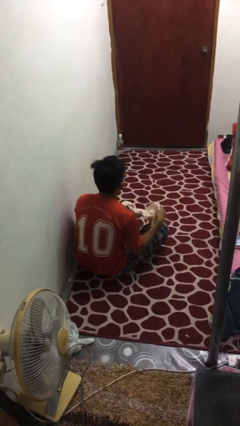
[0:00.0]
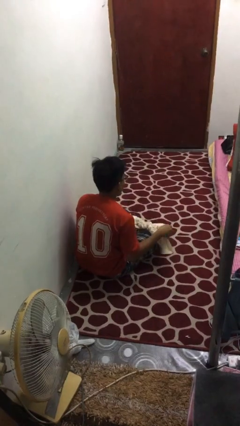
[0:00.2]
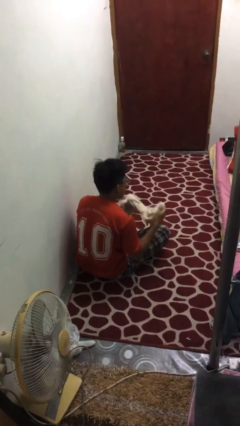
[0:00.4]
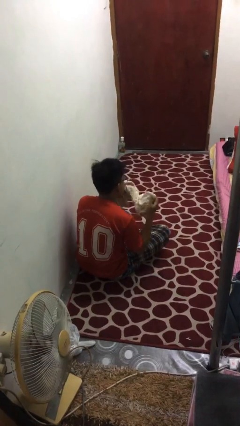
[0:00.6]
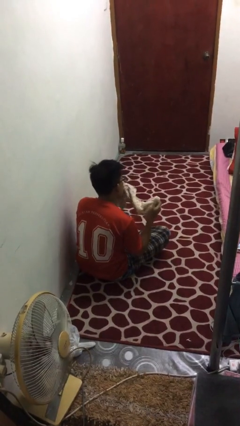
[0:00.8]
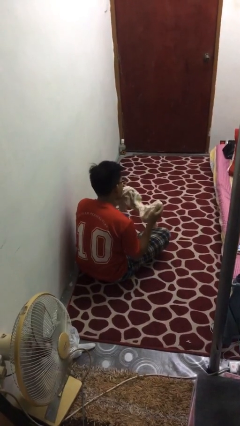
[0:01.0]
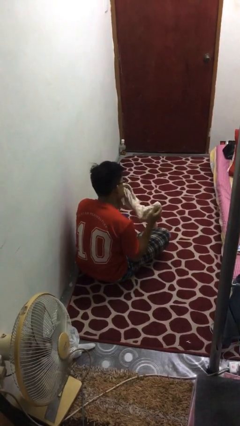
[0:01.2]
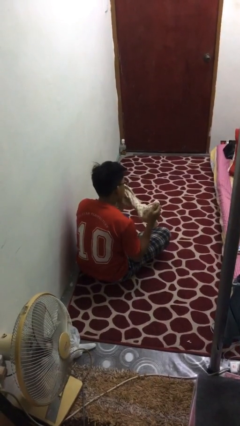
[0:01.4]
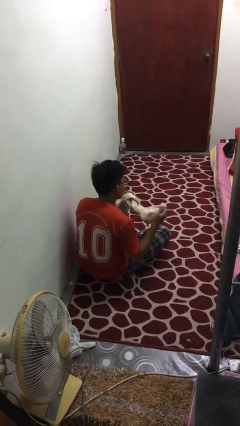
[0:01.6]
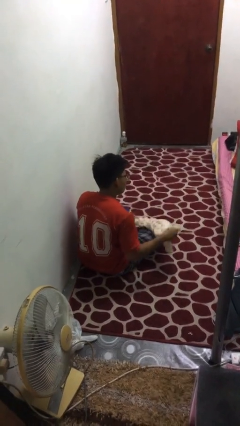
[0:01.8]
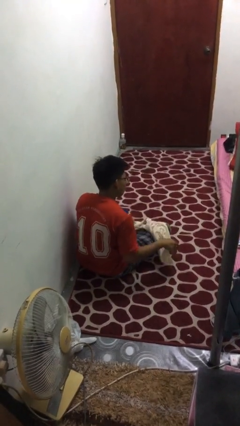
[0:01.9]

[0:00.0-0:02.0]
person wipes mouth with napkin

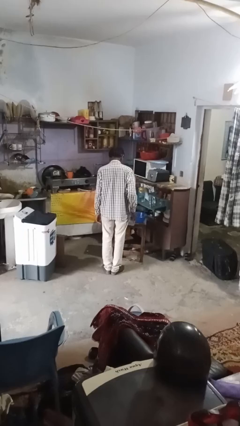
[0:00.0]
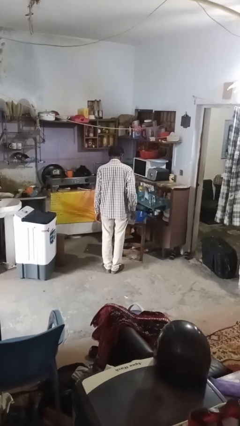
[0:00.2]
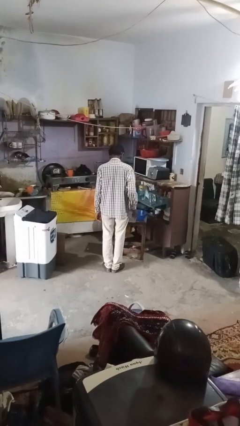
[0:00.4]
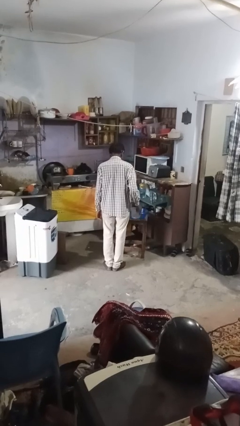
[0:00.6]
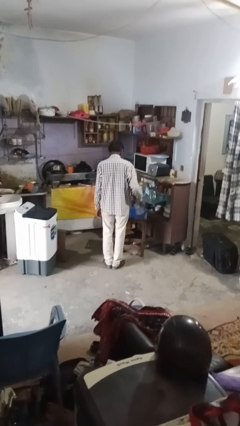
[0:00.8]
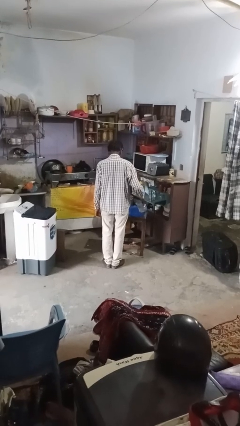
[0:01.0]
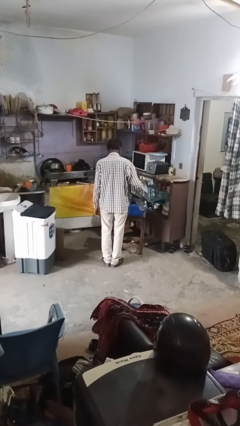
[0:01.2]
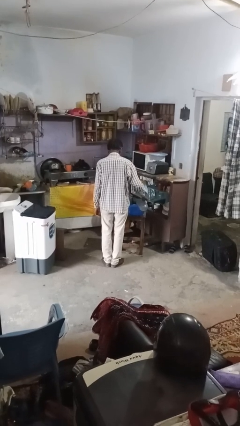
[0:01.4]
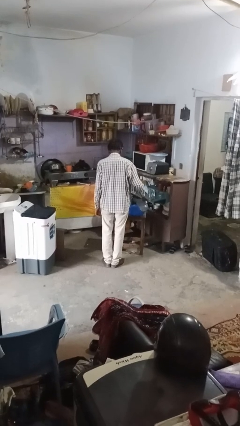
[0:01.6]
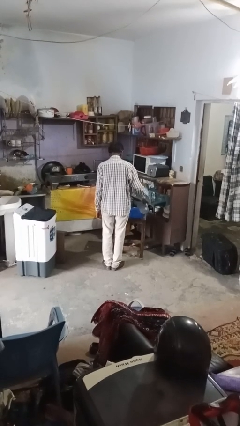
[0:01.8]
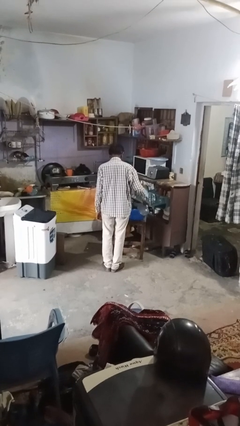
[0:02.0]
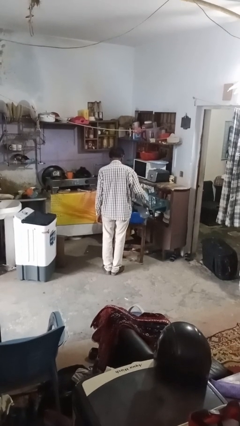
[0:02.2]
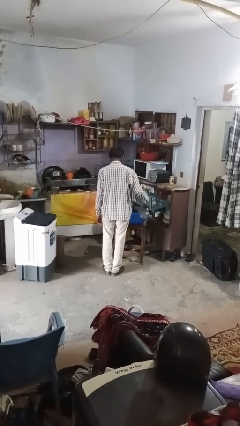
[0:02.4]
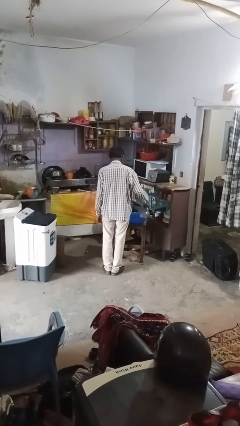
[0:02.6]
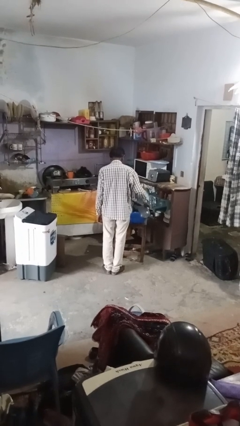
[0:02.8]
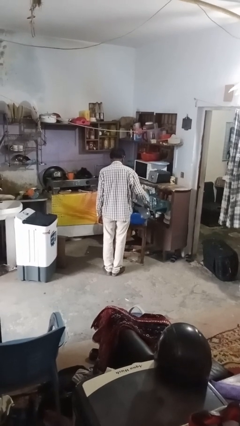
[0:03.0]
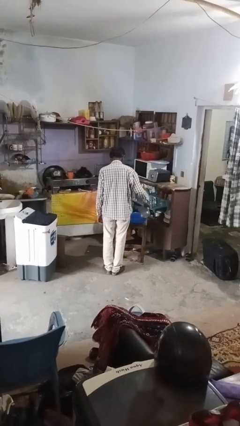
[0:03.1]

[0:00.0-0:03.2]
person pours into bowl

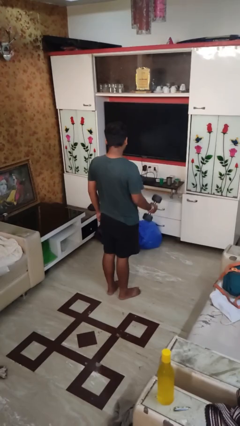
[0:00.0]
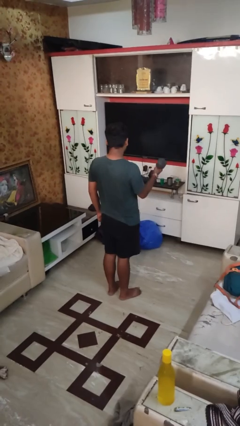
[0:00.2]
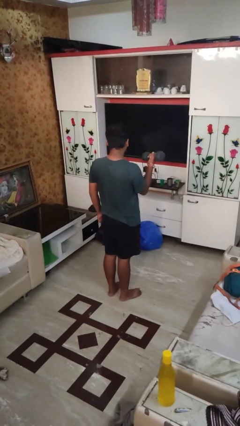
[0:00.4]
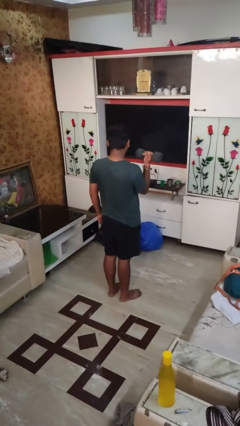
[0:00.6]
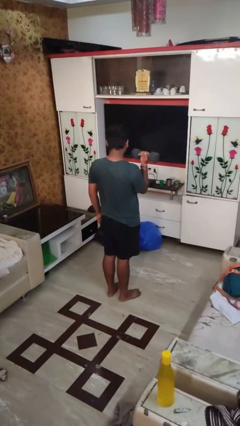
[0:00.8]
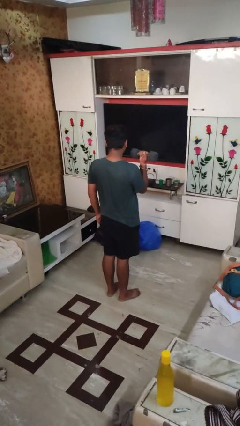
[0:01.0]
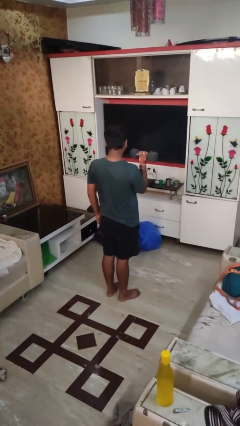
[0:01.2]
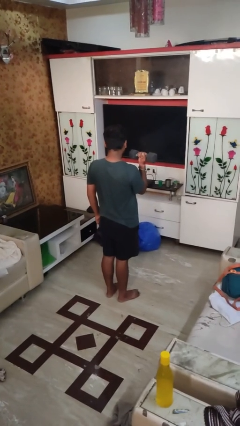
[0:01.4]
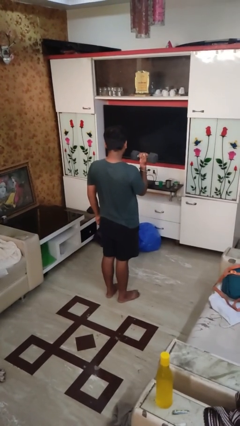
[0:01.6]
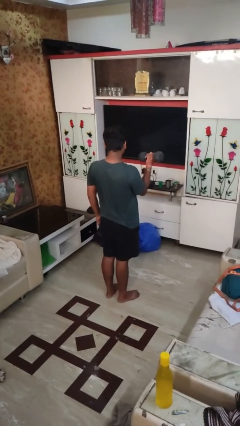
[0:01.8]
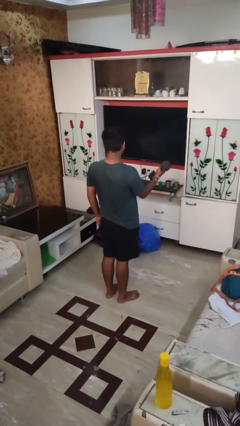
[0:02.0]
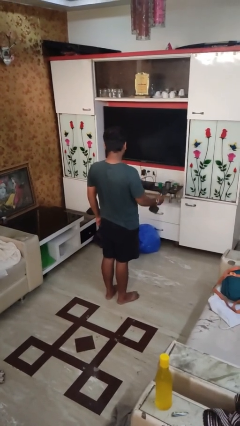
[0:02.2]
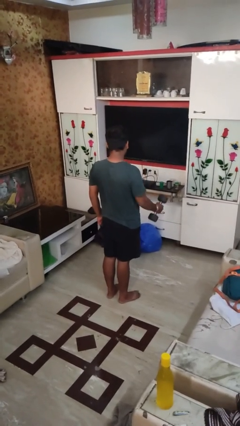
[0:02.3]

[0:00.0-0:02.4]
person lifts dumbbells

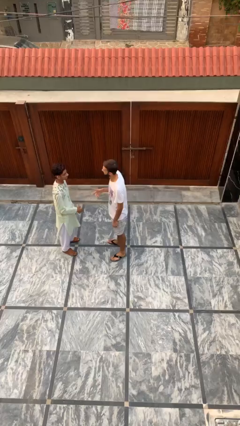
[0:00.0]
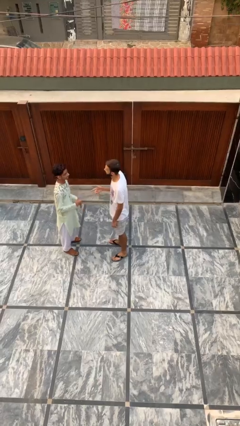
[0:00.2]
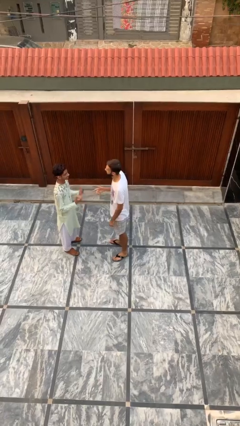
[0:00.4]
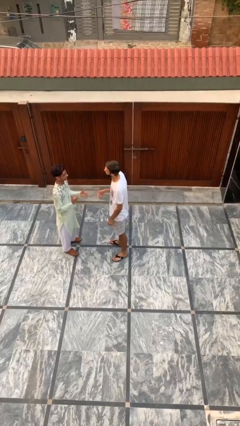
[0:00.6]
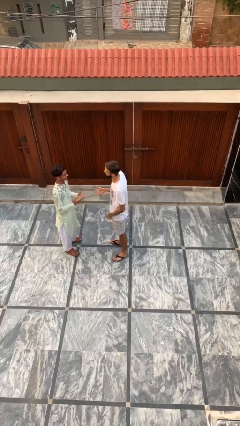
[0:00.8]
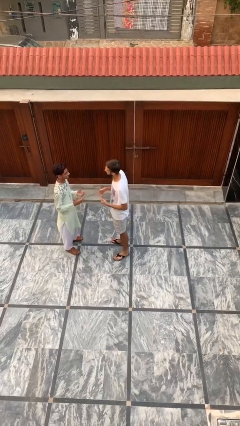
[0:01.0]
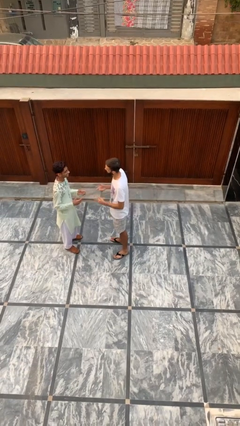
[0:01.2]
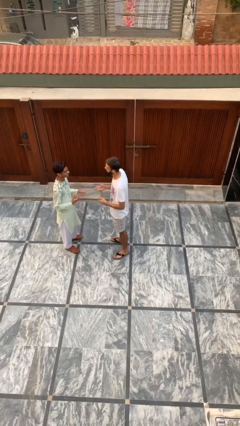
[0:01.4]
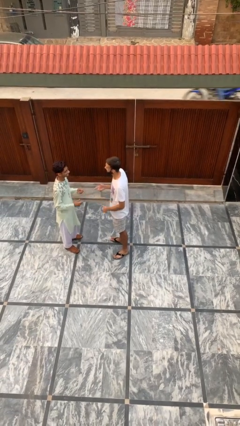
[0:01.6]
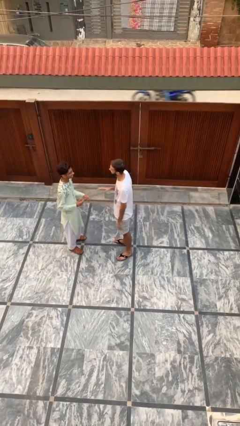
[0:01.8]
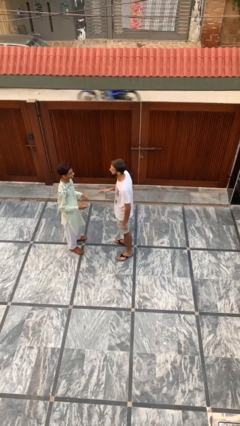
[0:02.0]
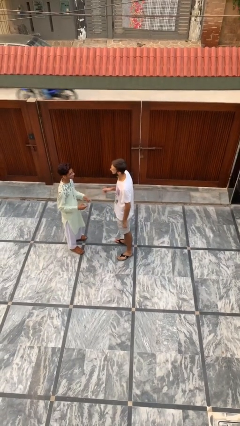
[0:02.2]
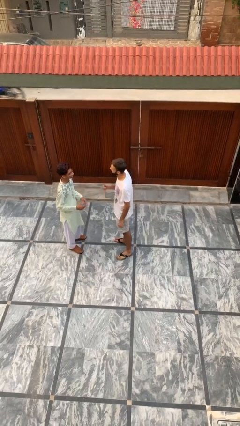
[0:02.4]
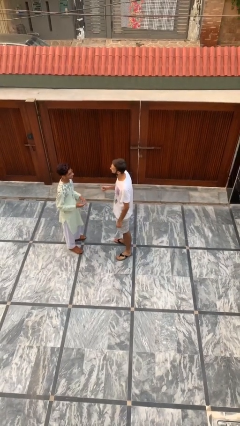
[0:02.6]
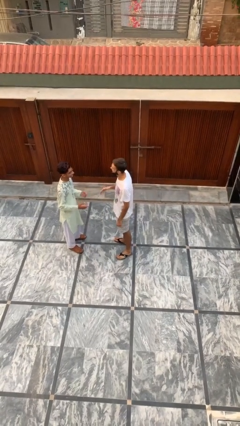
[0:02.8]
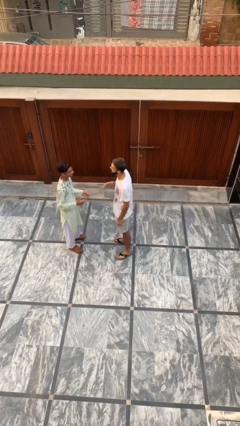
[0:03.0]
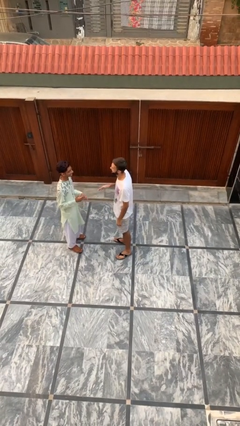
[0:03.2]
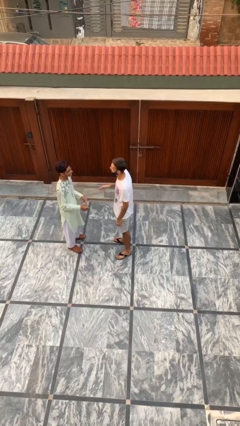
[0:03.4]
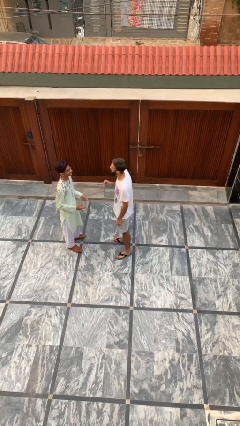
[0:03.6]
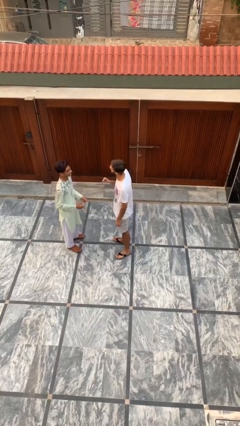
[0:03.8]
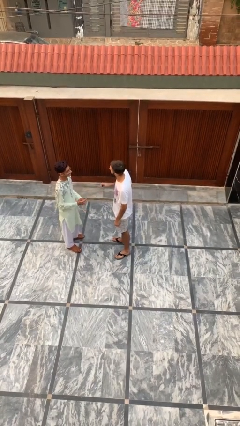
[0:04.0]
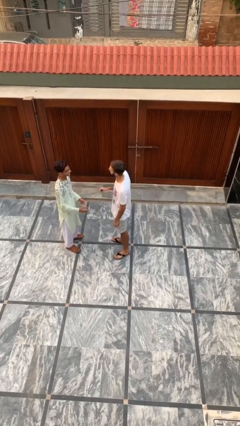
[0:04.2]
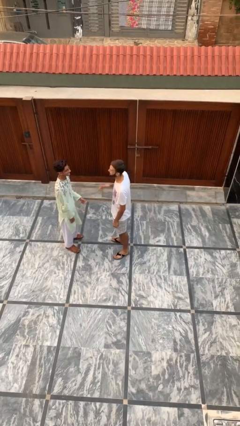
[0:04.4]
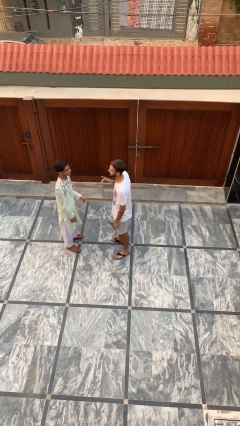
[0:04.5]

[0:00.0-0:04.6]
person talks to person

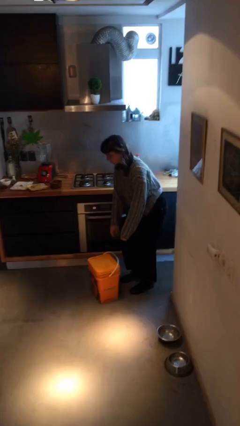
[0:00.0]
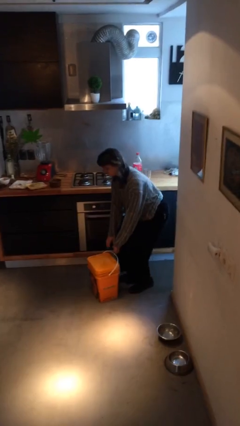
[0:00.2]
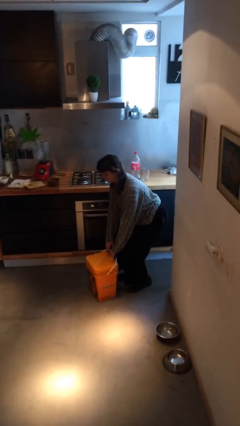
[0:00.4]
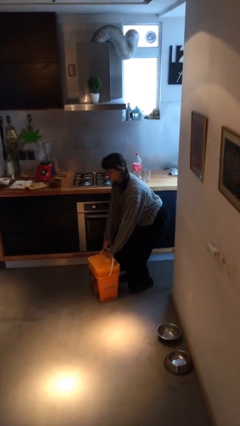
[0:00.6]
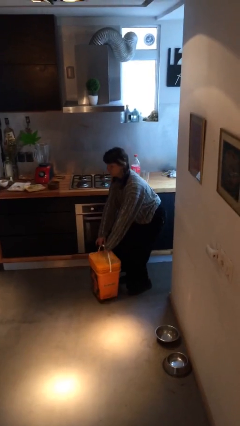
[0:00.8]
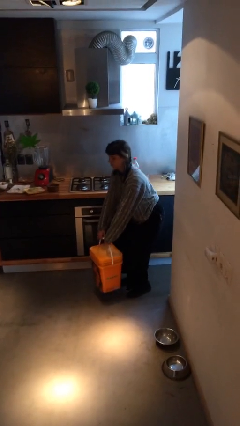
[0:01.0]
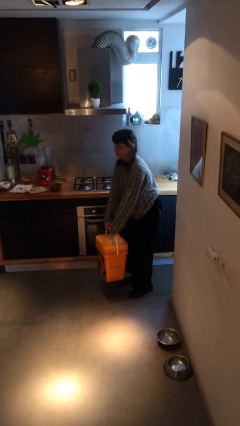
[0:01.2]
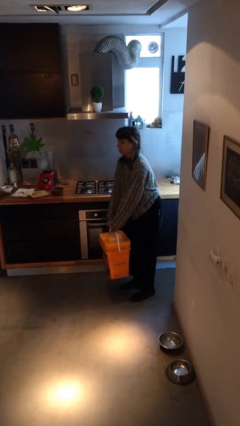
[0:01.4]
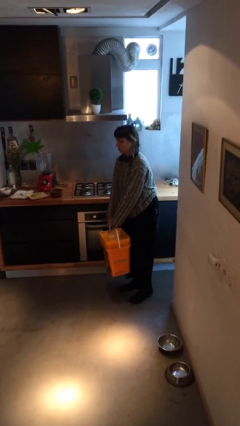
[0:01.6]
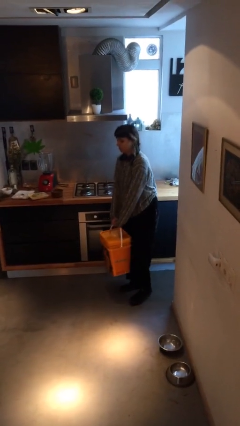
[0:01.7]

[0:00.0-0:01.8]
person picks up object from floor

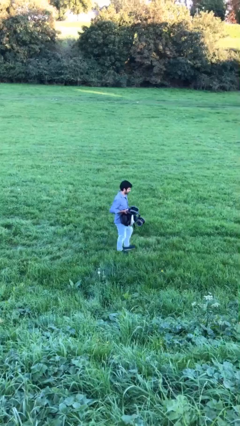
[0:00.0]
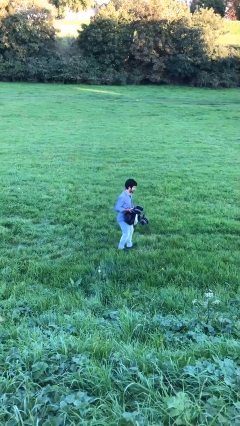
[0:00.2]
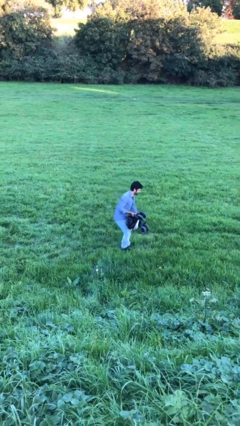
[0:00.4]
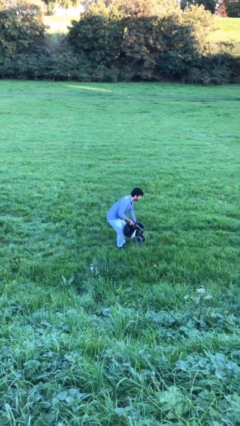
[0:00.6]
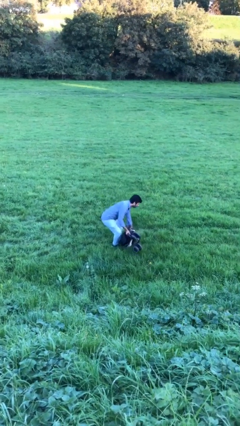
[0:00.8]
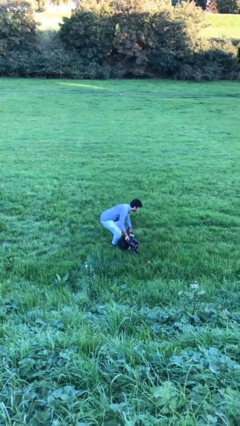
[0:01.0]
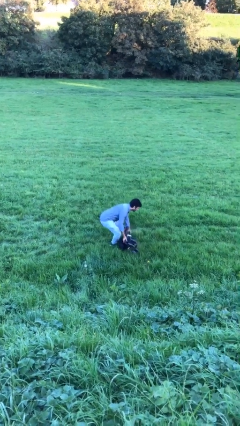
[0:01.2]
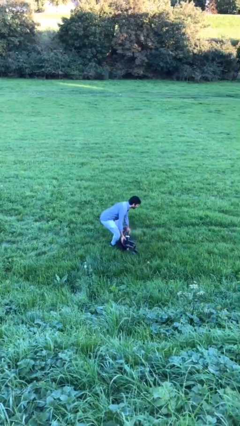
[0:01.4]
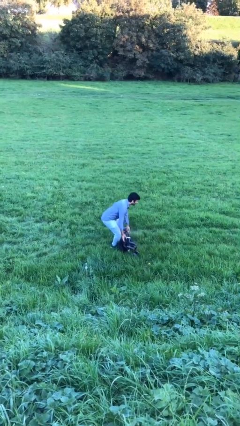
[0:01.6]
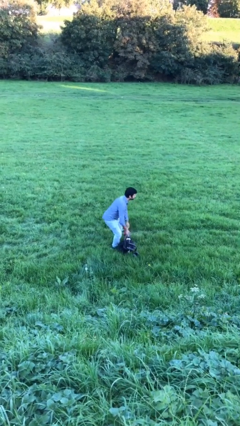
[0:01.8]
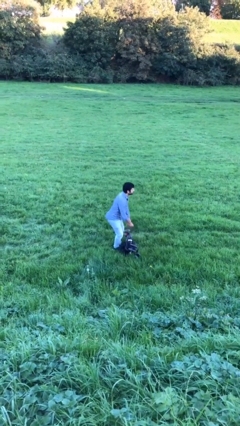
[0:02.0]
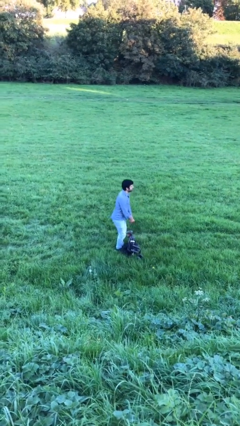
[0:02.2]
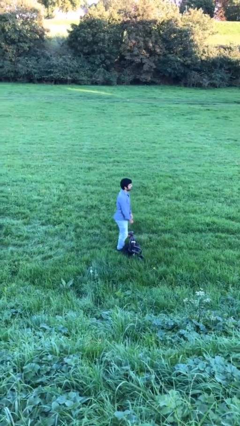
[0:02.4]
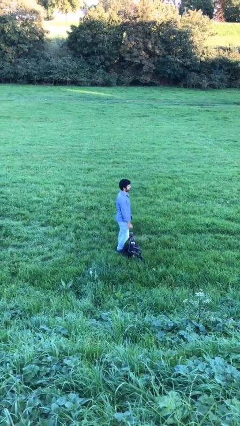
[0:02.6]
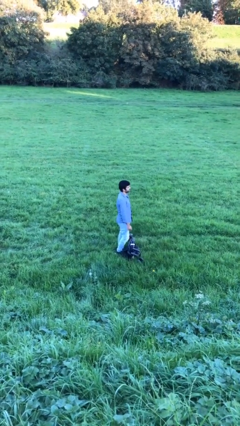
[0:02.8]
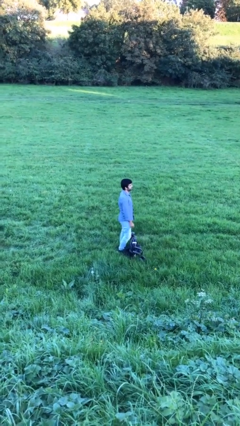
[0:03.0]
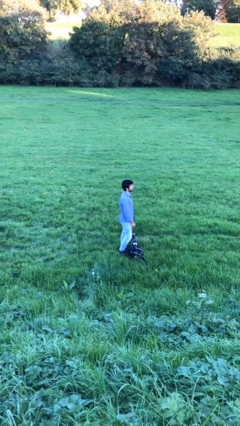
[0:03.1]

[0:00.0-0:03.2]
person puts down object on floor

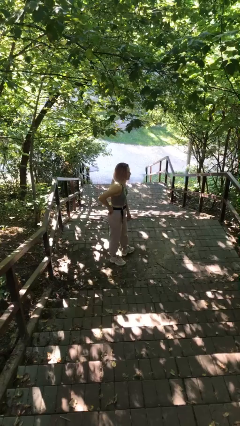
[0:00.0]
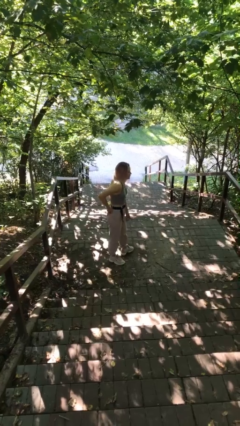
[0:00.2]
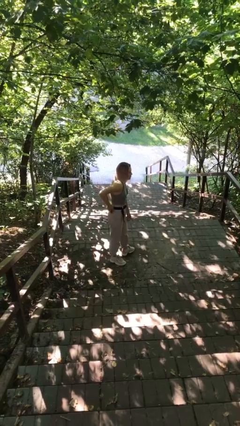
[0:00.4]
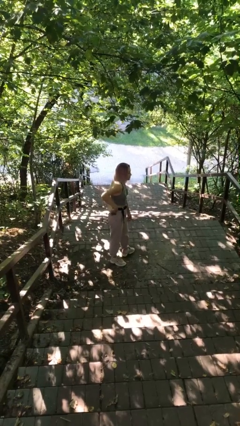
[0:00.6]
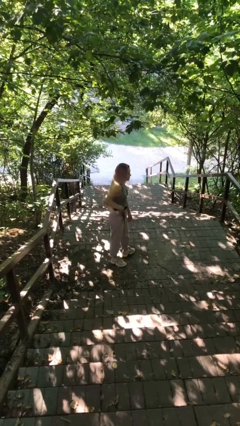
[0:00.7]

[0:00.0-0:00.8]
person takes phone from pocket
